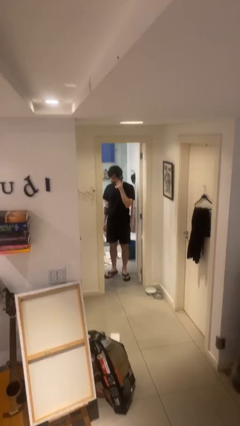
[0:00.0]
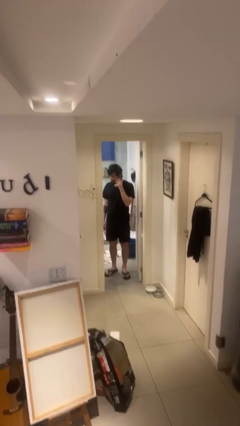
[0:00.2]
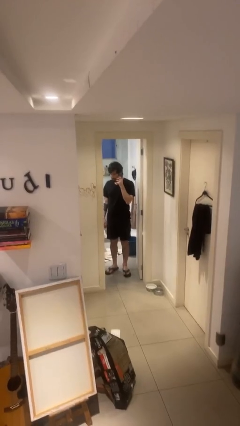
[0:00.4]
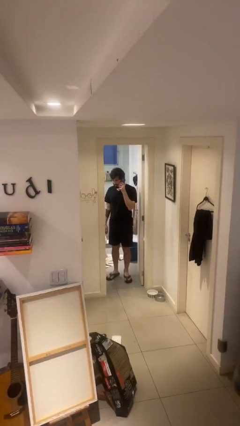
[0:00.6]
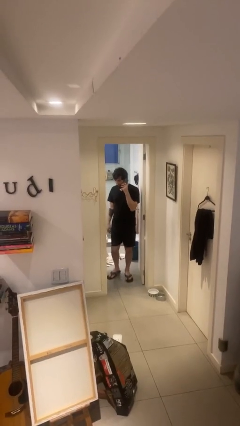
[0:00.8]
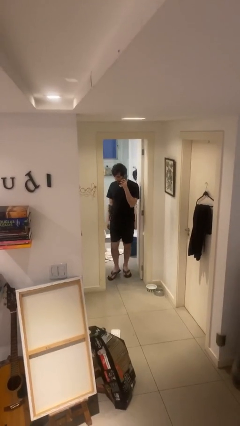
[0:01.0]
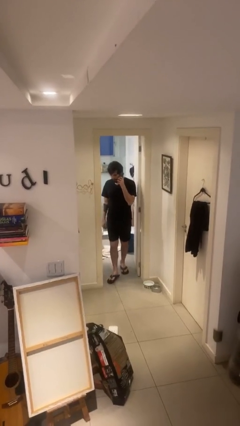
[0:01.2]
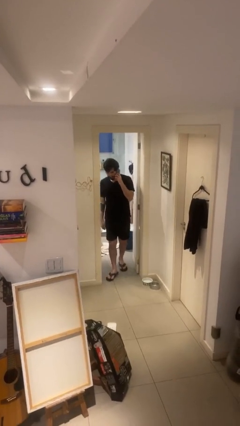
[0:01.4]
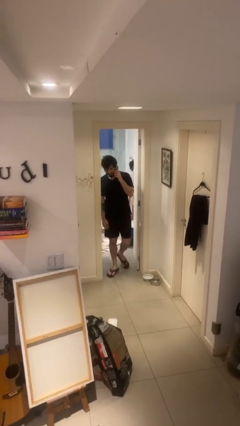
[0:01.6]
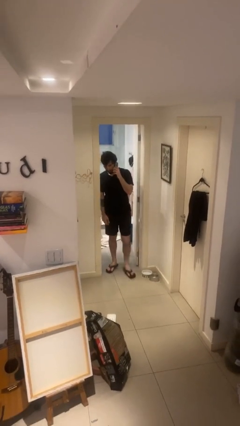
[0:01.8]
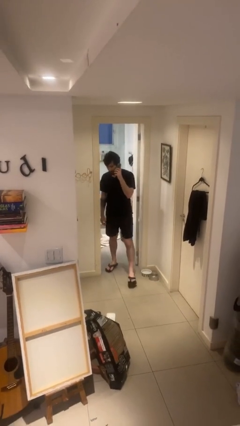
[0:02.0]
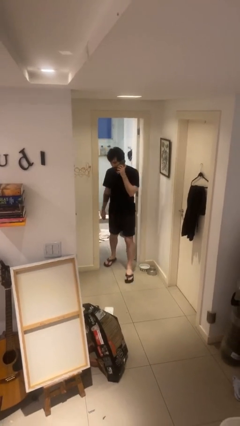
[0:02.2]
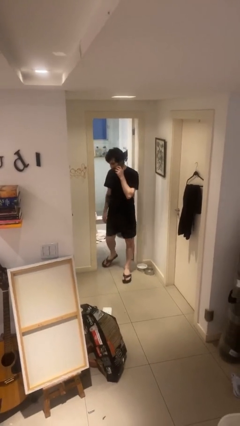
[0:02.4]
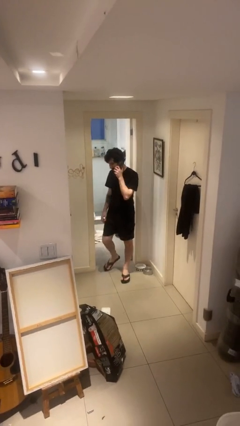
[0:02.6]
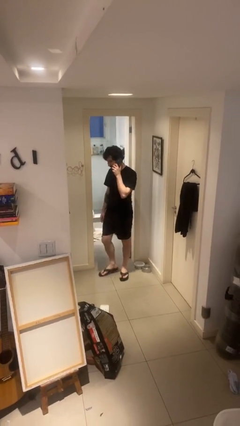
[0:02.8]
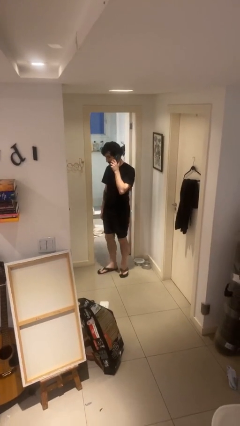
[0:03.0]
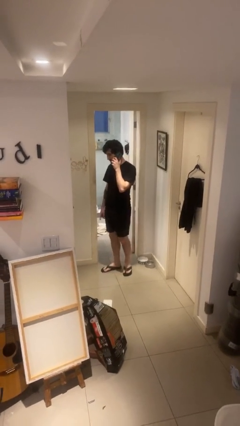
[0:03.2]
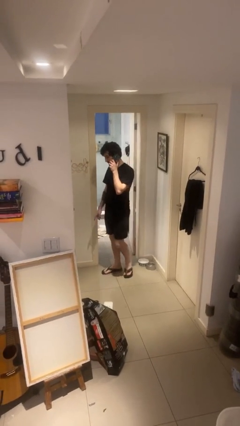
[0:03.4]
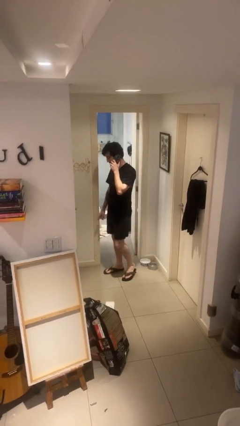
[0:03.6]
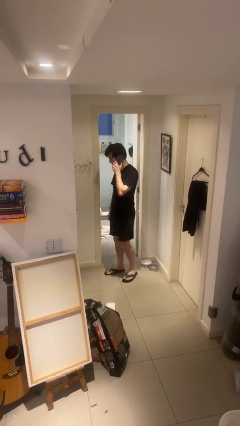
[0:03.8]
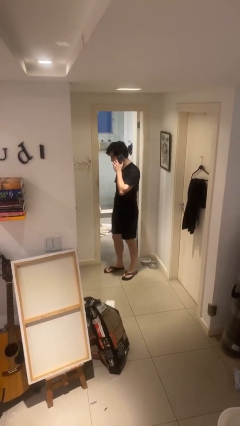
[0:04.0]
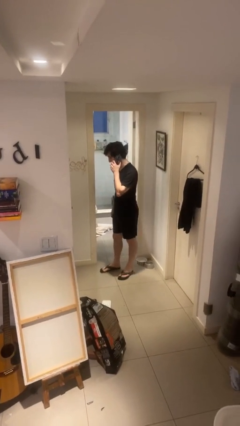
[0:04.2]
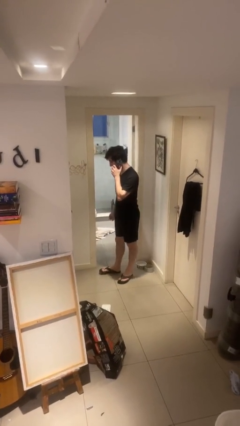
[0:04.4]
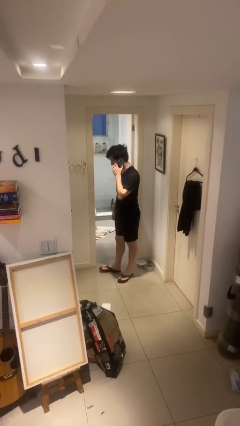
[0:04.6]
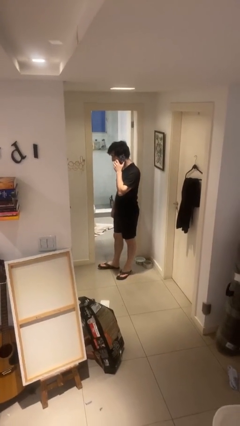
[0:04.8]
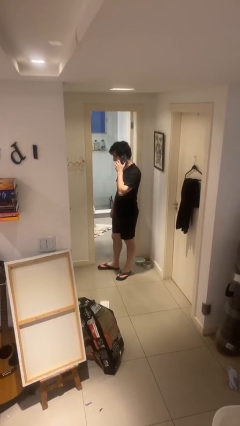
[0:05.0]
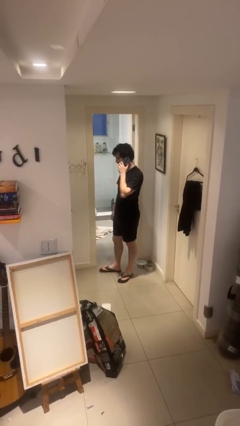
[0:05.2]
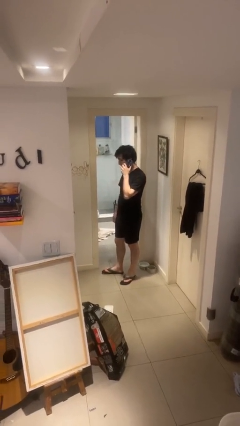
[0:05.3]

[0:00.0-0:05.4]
person enters scene through structure

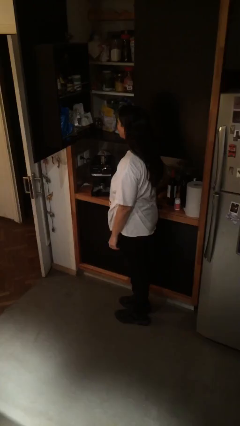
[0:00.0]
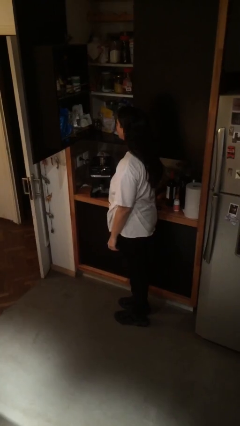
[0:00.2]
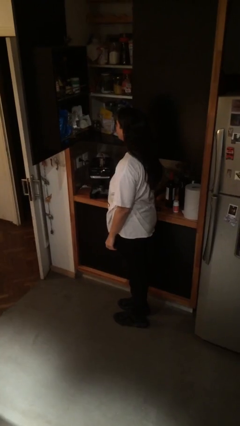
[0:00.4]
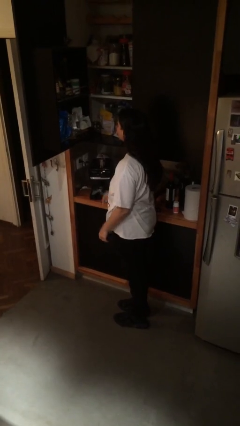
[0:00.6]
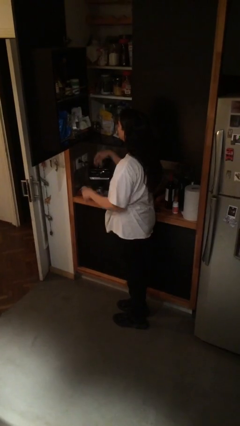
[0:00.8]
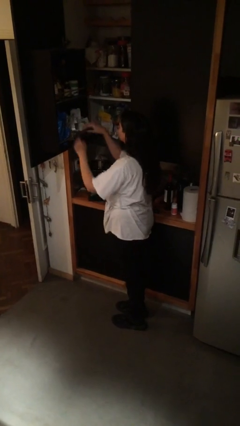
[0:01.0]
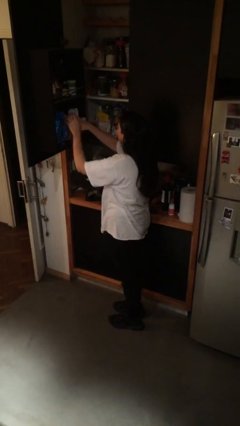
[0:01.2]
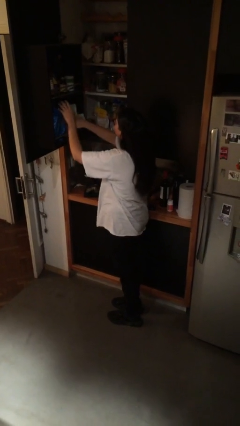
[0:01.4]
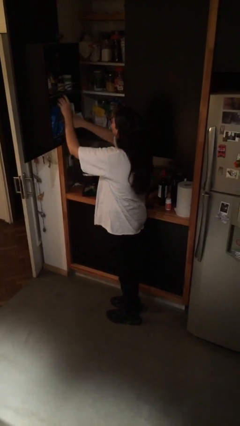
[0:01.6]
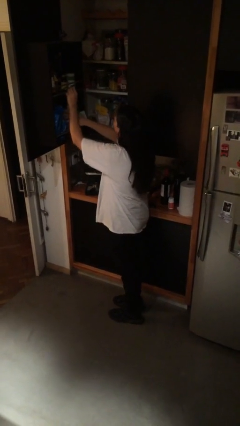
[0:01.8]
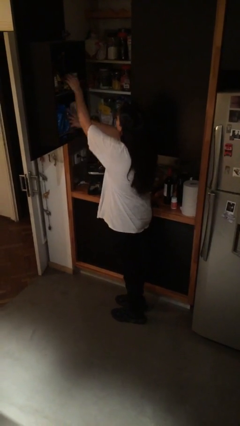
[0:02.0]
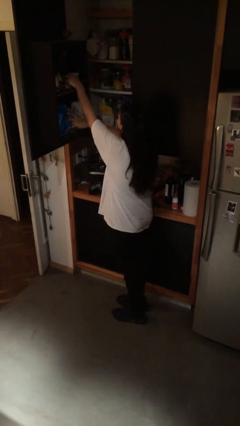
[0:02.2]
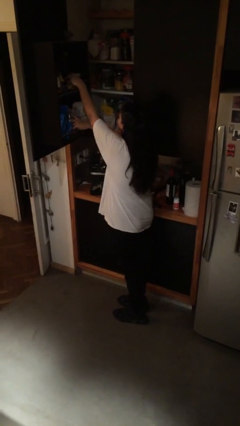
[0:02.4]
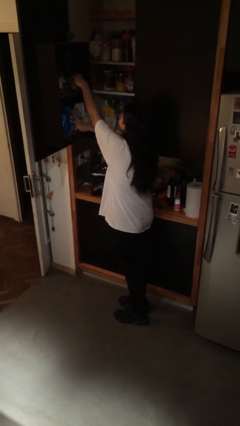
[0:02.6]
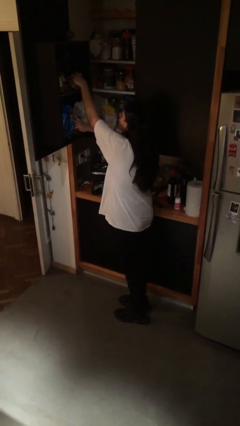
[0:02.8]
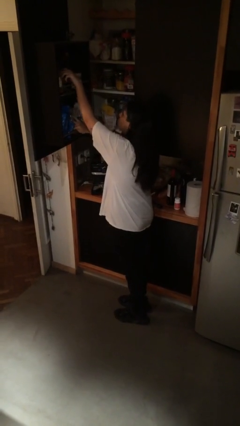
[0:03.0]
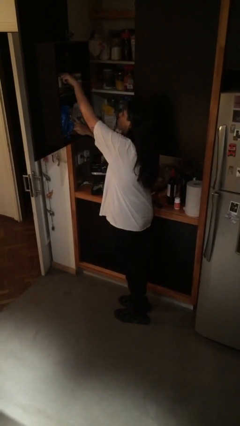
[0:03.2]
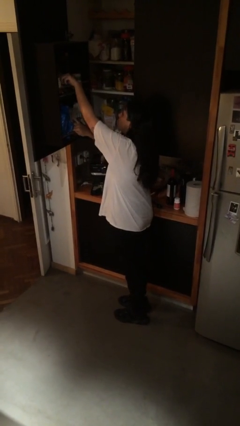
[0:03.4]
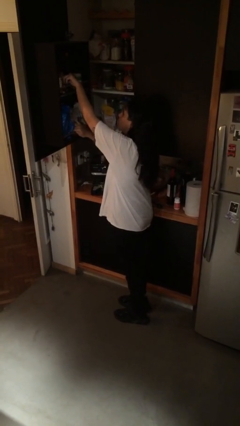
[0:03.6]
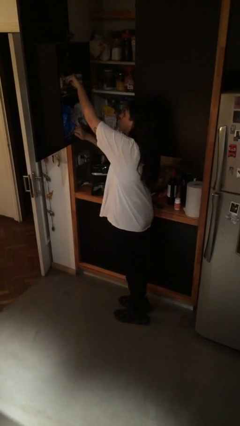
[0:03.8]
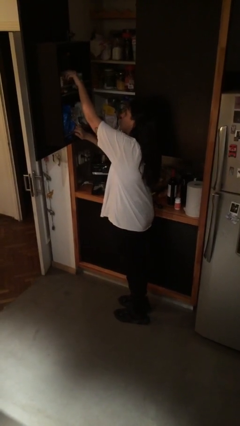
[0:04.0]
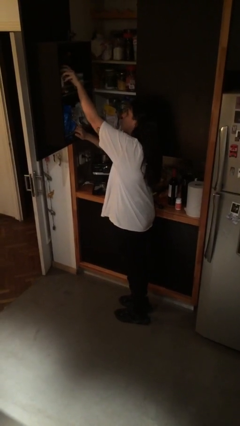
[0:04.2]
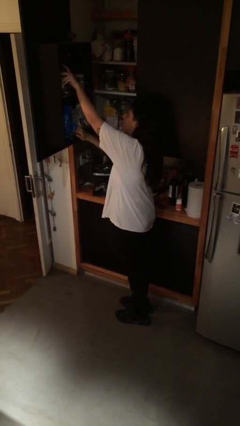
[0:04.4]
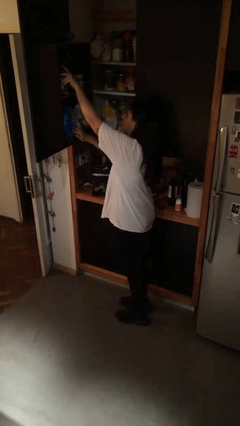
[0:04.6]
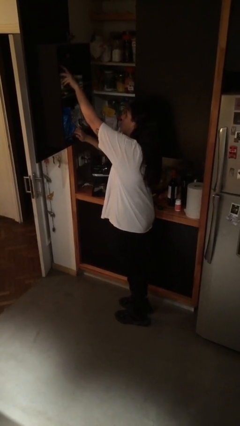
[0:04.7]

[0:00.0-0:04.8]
person searches in cabinet

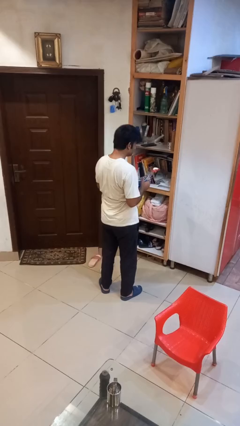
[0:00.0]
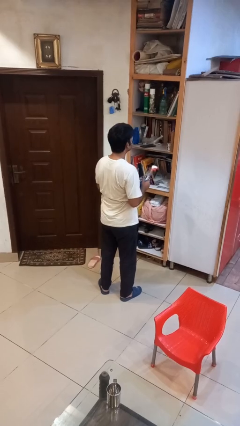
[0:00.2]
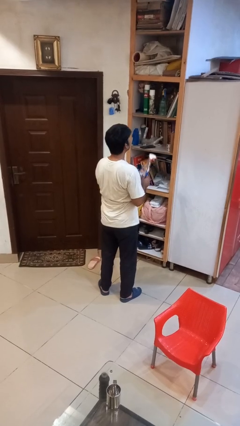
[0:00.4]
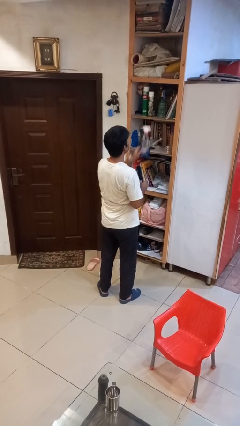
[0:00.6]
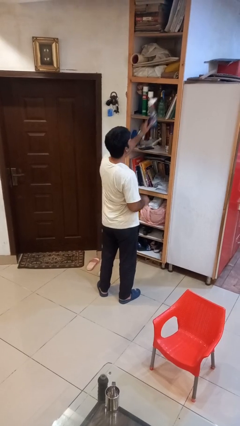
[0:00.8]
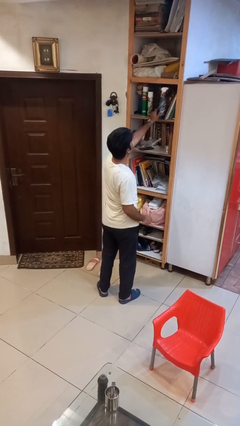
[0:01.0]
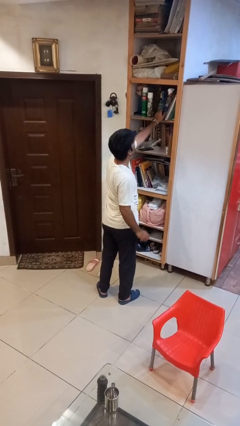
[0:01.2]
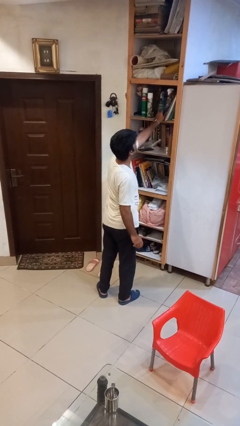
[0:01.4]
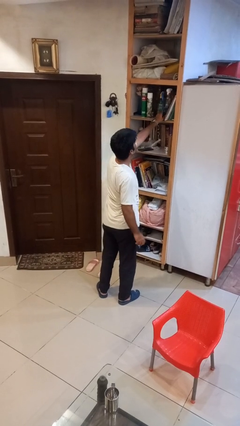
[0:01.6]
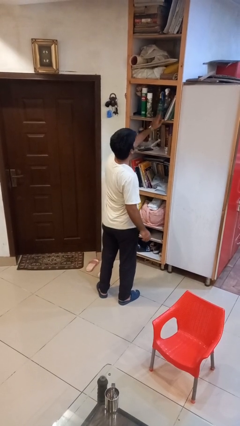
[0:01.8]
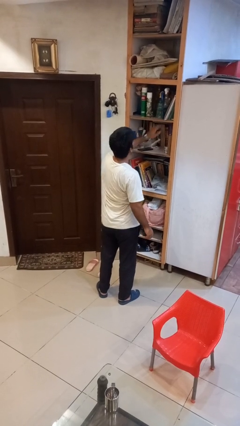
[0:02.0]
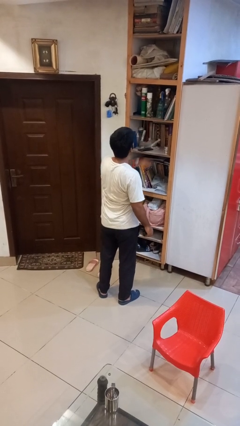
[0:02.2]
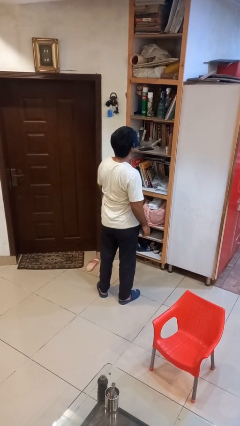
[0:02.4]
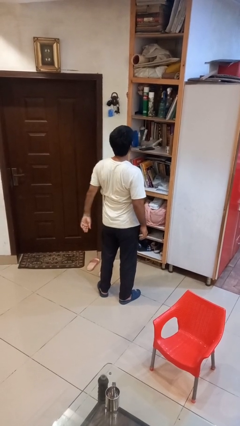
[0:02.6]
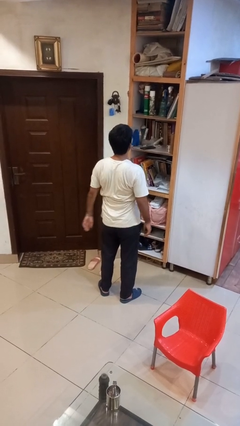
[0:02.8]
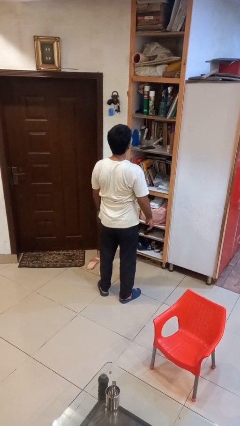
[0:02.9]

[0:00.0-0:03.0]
person puts down object on shelf

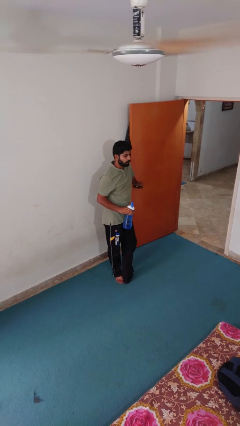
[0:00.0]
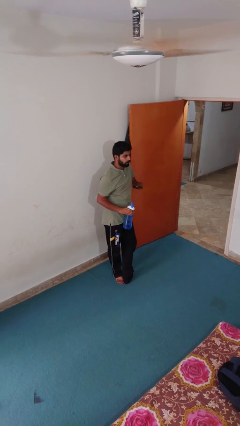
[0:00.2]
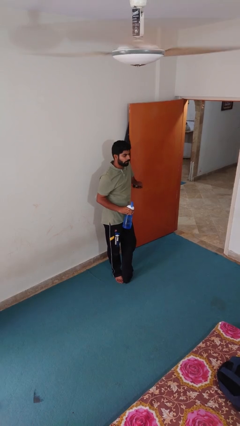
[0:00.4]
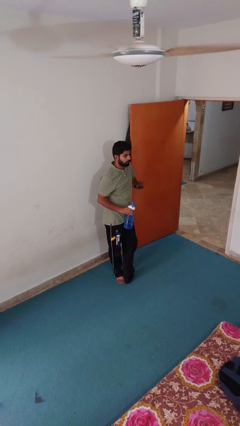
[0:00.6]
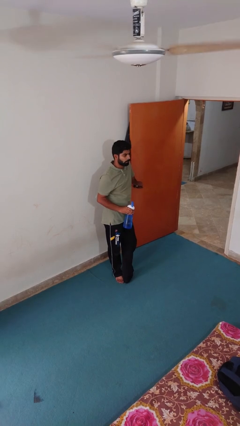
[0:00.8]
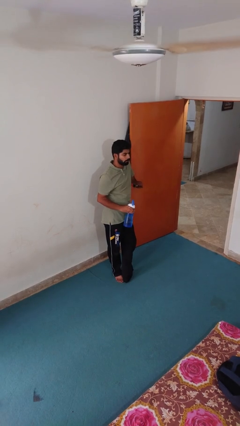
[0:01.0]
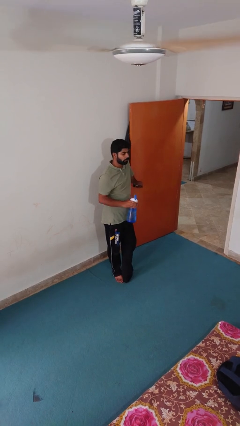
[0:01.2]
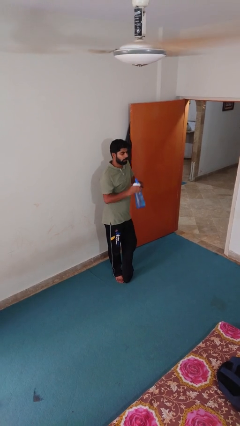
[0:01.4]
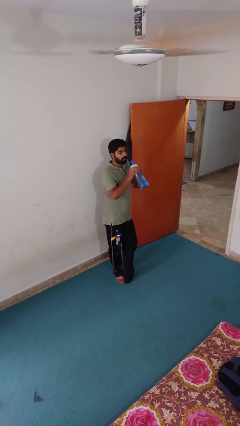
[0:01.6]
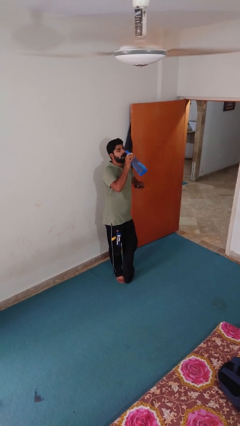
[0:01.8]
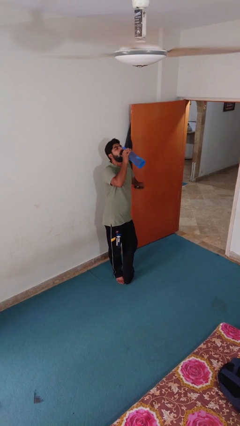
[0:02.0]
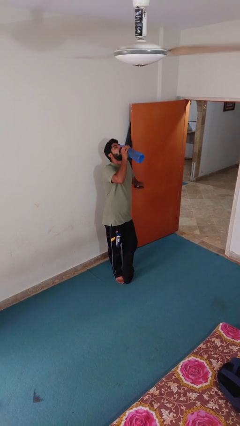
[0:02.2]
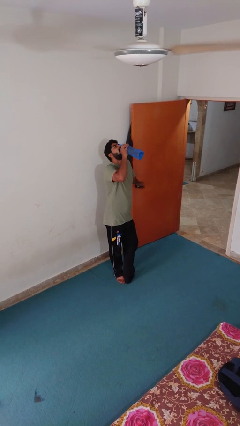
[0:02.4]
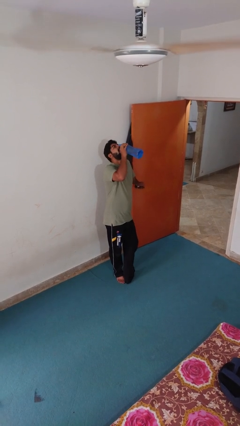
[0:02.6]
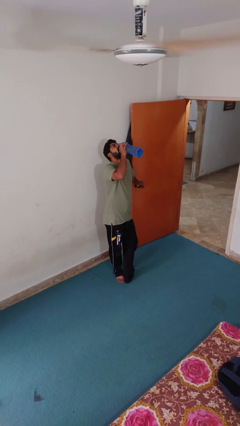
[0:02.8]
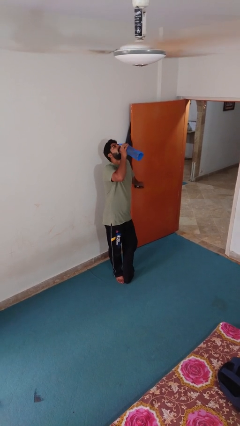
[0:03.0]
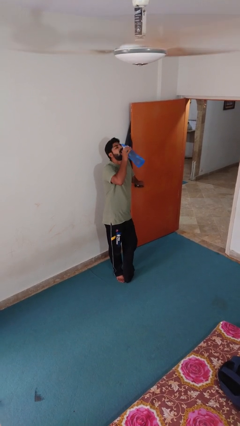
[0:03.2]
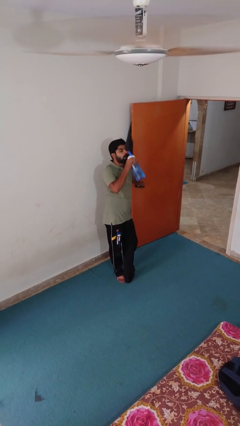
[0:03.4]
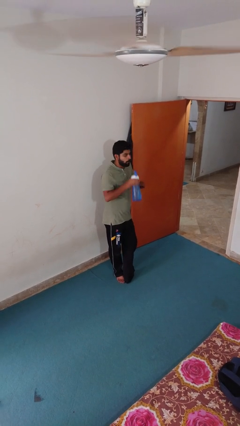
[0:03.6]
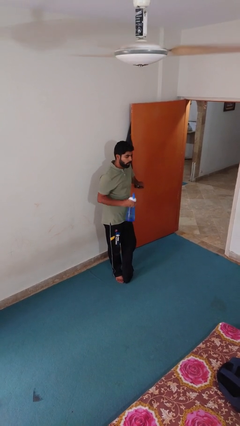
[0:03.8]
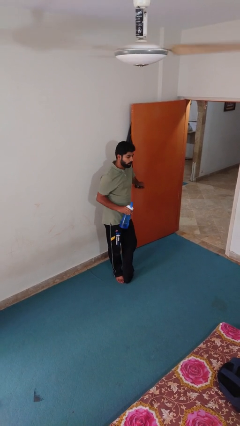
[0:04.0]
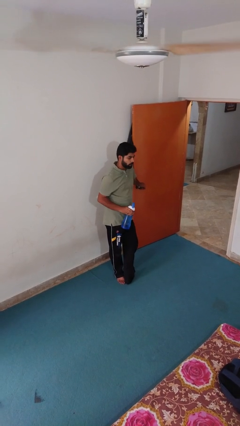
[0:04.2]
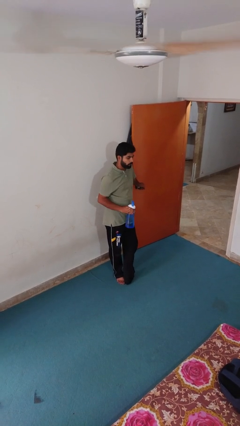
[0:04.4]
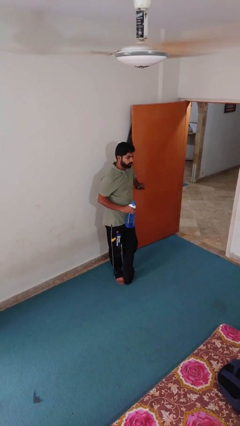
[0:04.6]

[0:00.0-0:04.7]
person drinks from bottle

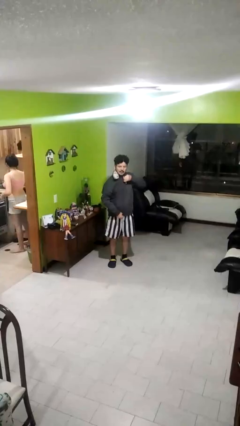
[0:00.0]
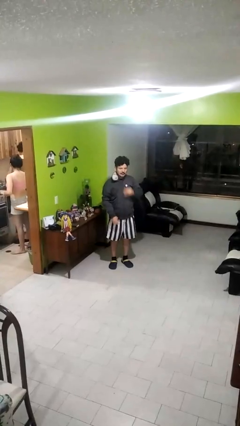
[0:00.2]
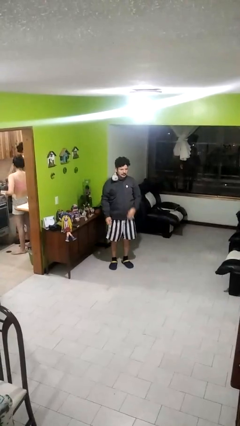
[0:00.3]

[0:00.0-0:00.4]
person zips up jacket
